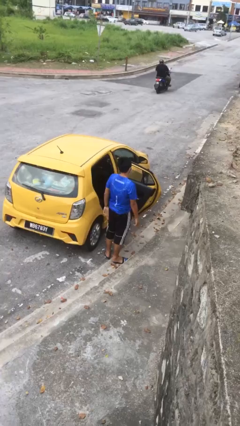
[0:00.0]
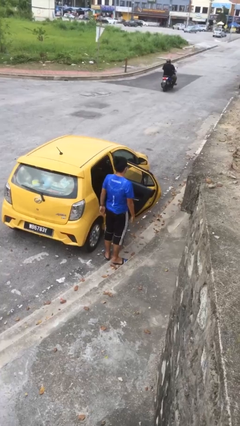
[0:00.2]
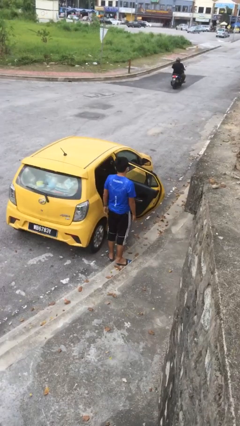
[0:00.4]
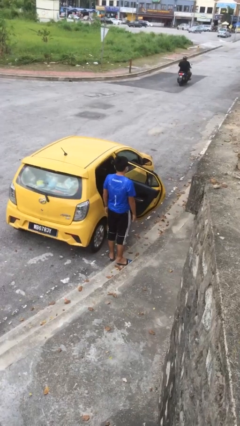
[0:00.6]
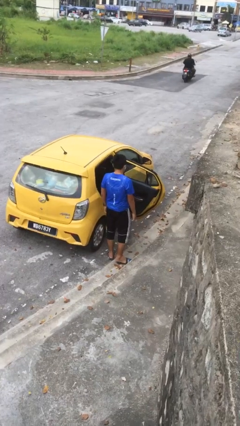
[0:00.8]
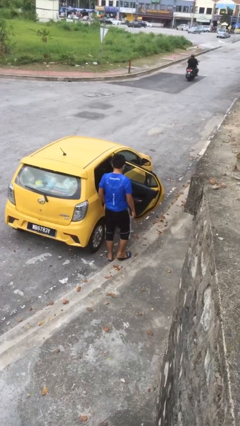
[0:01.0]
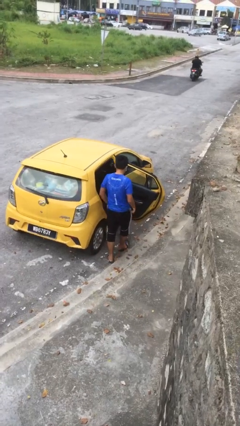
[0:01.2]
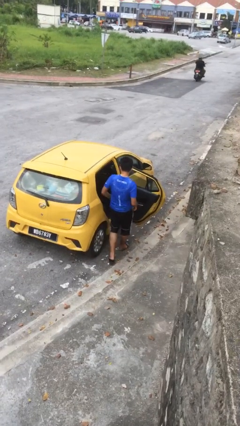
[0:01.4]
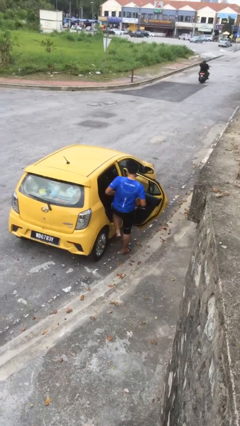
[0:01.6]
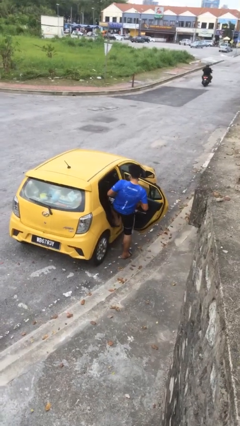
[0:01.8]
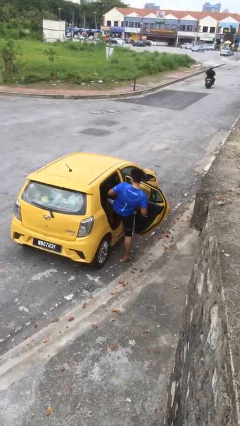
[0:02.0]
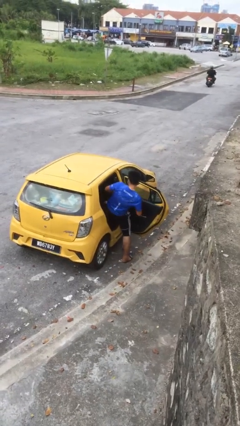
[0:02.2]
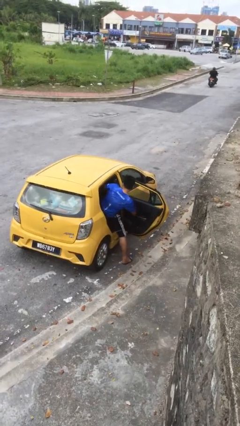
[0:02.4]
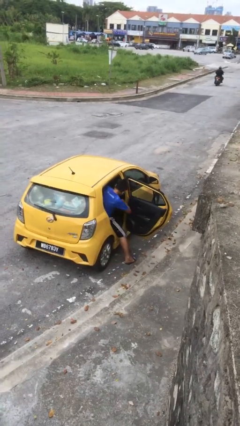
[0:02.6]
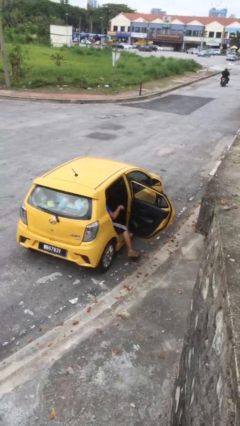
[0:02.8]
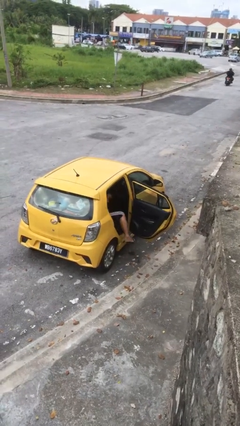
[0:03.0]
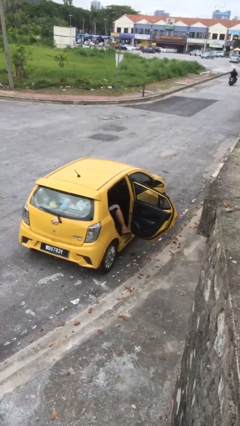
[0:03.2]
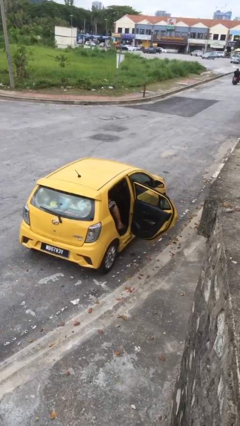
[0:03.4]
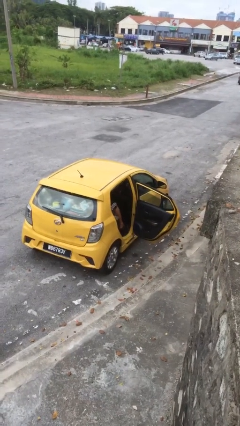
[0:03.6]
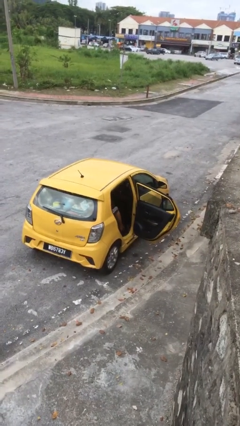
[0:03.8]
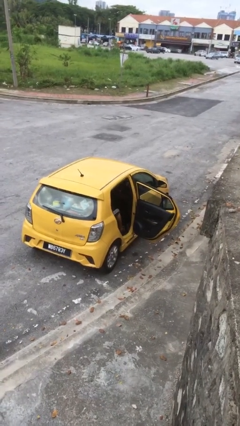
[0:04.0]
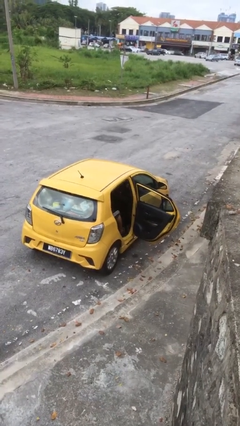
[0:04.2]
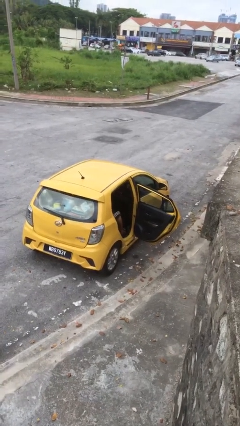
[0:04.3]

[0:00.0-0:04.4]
person enters car

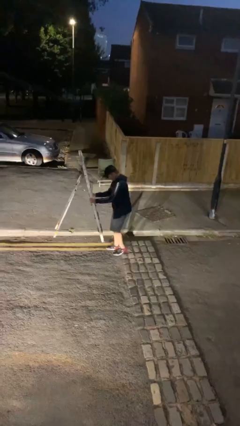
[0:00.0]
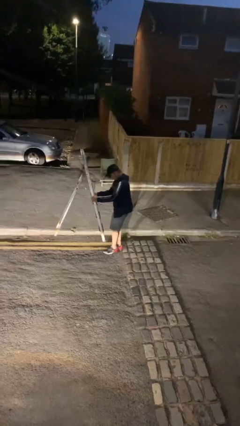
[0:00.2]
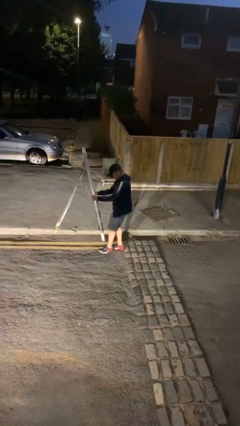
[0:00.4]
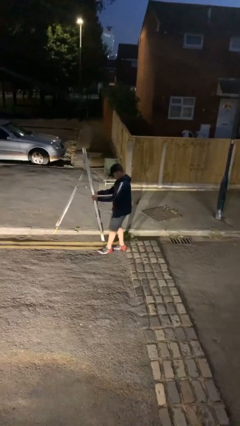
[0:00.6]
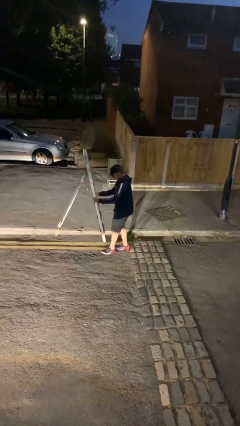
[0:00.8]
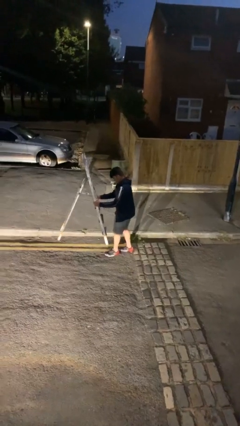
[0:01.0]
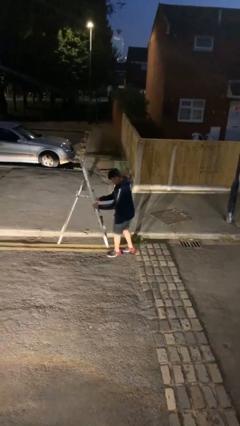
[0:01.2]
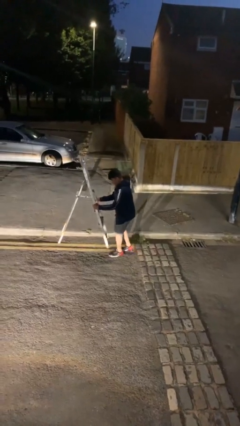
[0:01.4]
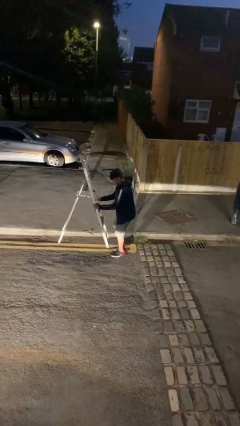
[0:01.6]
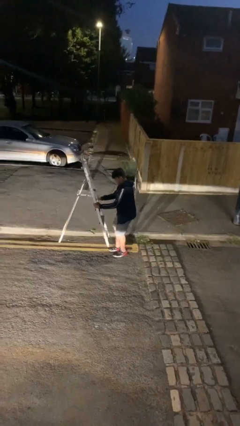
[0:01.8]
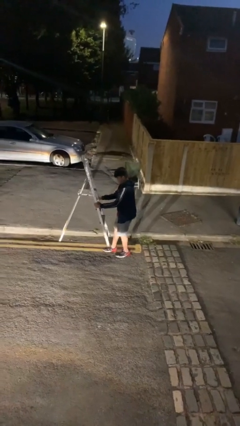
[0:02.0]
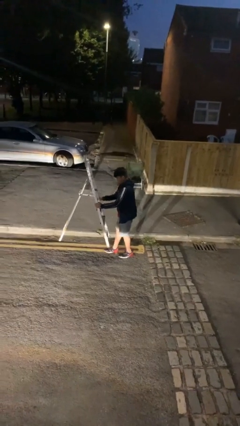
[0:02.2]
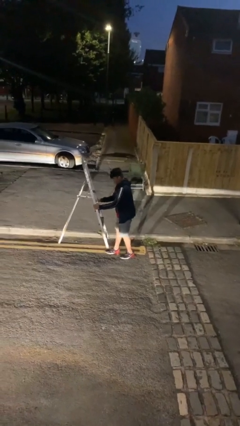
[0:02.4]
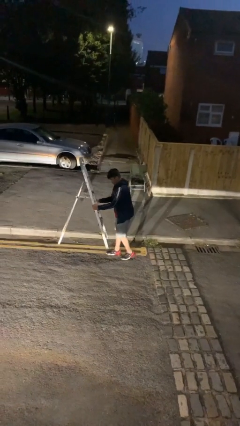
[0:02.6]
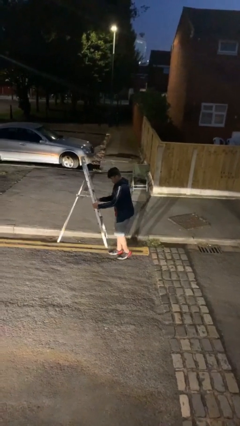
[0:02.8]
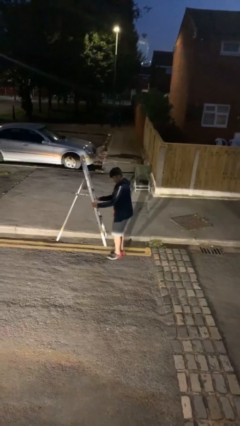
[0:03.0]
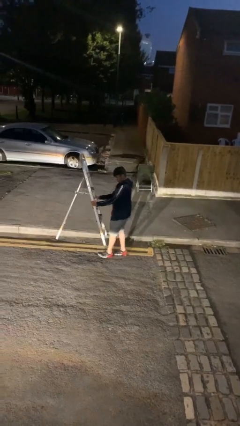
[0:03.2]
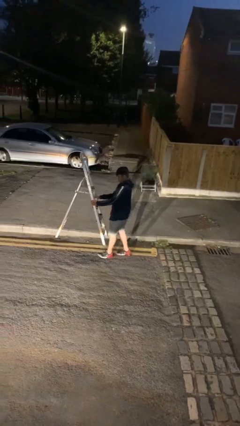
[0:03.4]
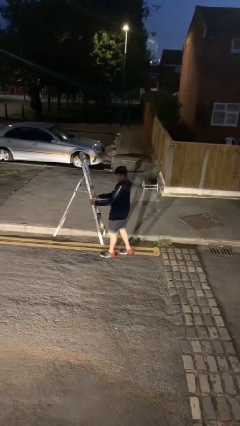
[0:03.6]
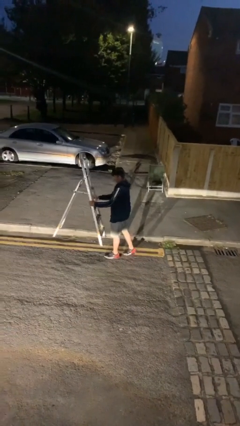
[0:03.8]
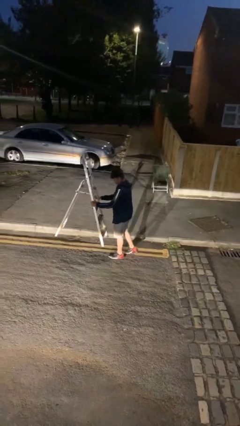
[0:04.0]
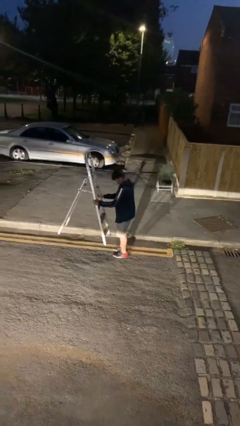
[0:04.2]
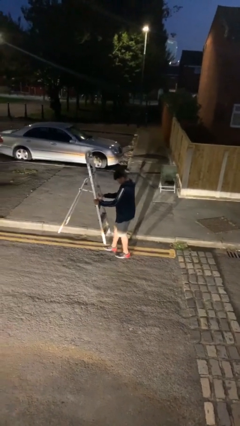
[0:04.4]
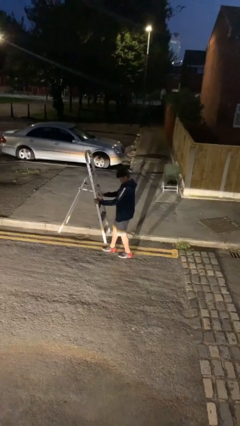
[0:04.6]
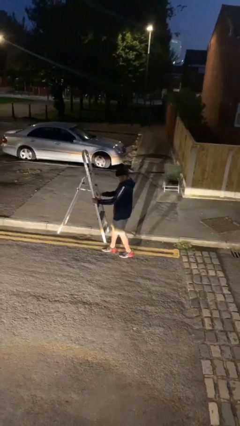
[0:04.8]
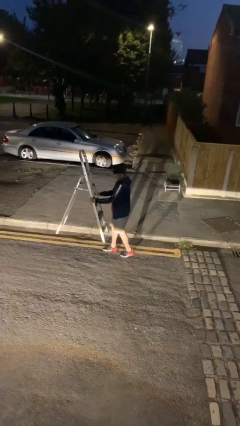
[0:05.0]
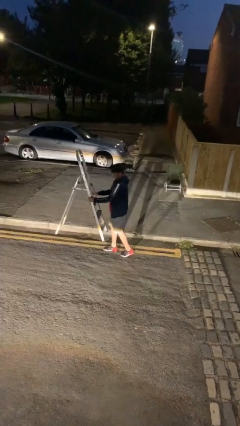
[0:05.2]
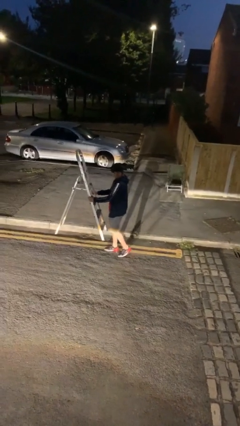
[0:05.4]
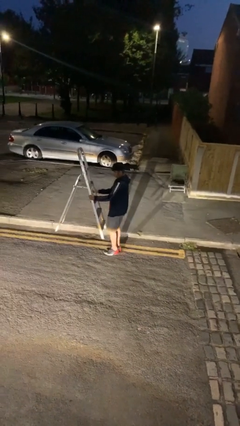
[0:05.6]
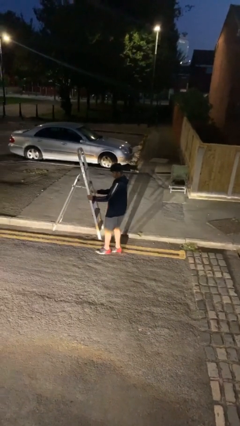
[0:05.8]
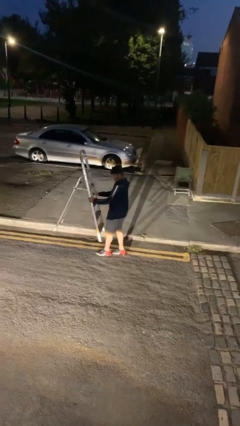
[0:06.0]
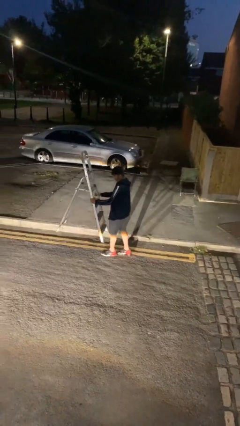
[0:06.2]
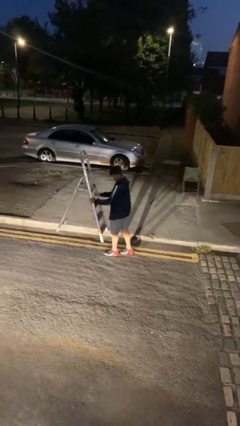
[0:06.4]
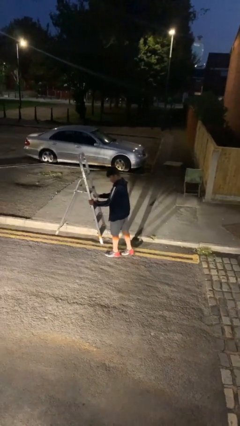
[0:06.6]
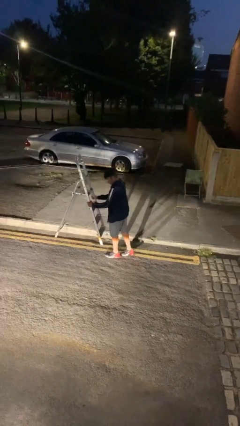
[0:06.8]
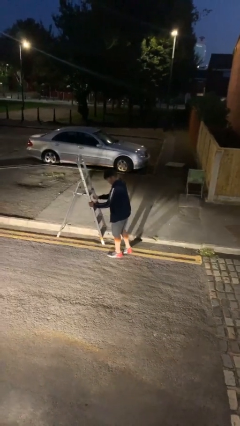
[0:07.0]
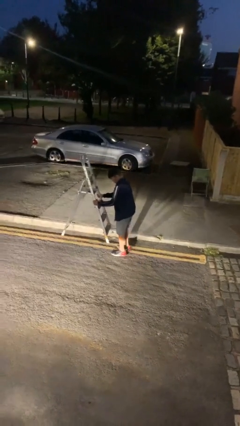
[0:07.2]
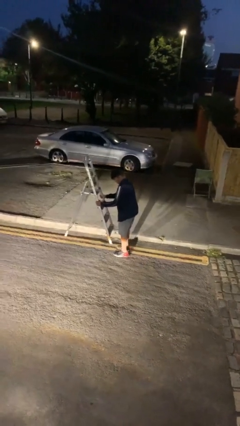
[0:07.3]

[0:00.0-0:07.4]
person carries heavy object

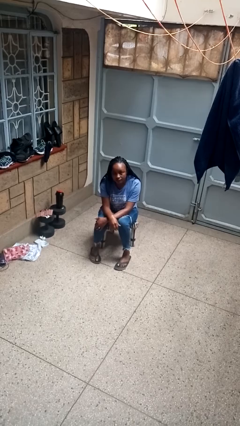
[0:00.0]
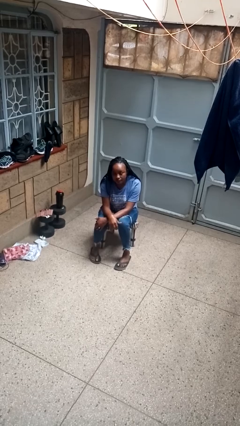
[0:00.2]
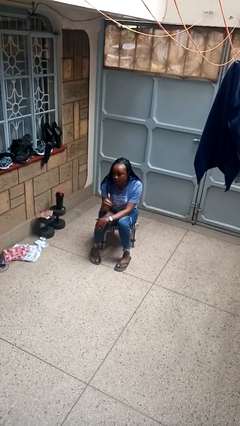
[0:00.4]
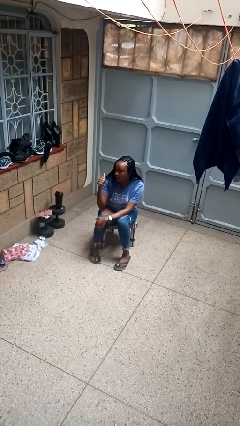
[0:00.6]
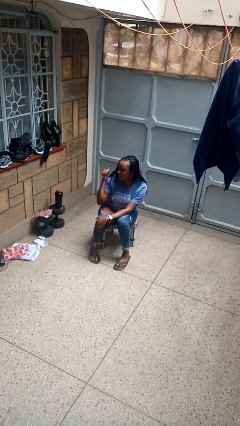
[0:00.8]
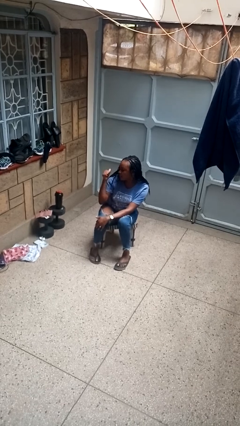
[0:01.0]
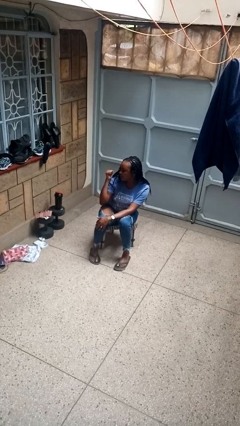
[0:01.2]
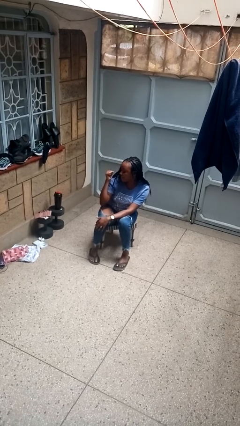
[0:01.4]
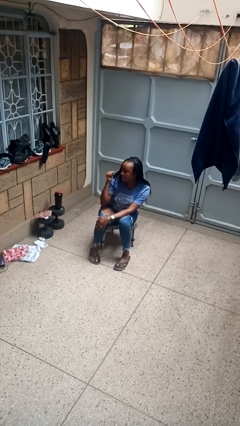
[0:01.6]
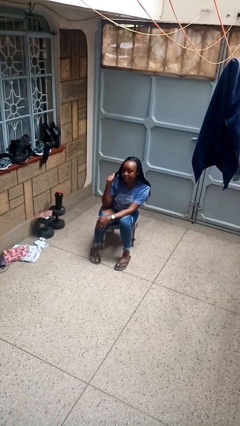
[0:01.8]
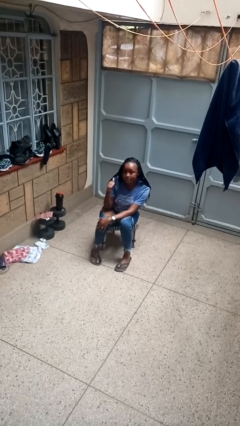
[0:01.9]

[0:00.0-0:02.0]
person gestures behind me

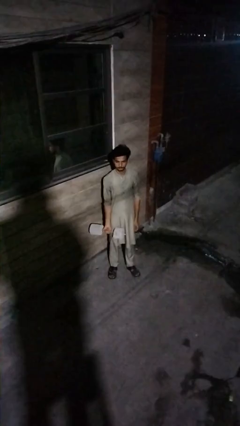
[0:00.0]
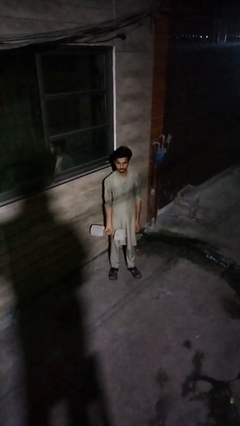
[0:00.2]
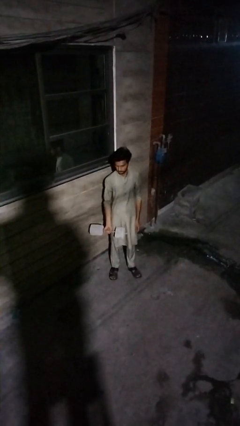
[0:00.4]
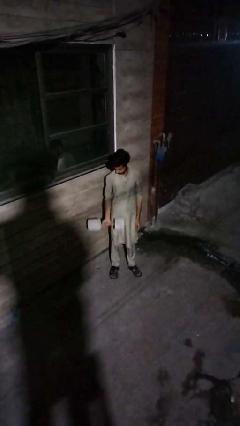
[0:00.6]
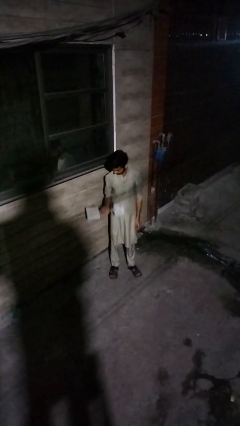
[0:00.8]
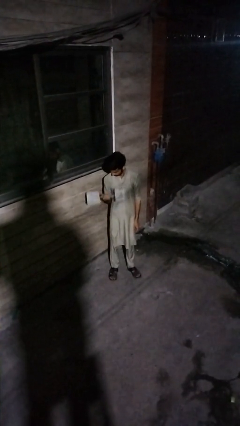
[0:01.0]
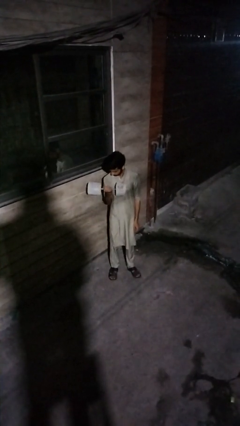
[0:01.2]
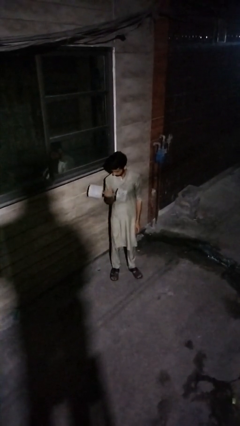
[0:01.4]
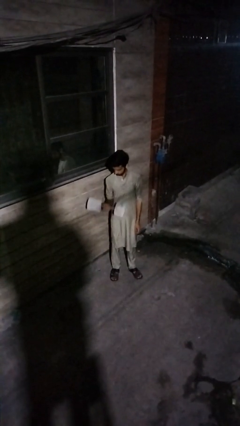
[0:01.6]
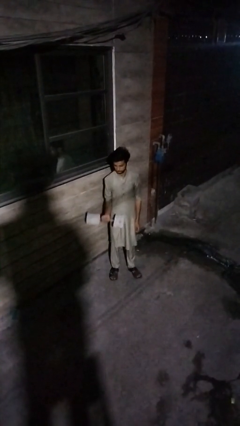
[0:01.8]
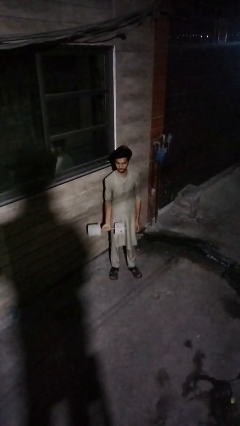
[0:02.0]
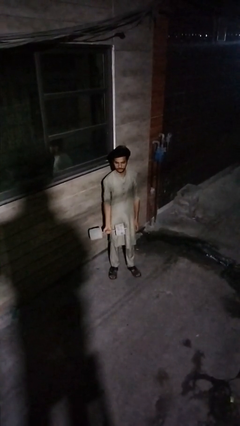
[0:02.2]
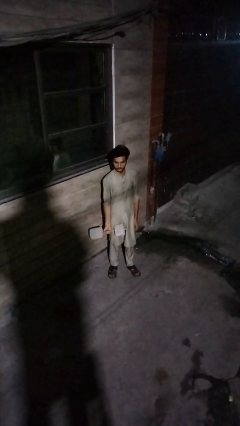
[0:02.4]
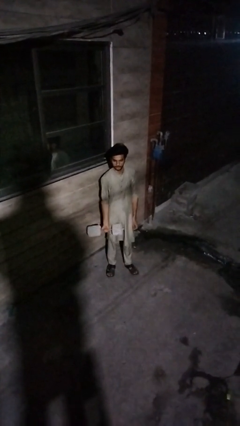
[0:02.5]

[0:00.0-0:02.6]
person lifts dumbbells

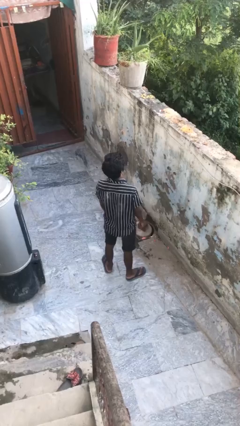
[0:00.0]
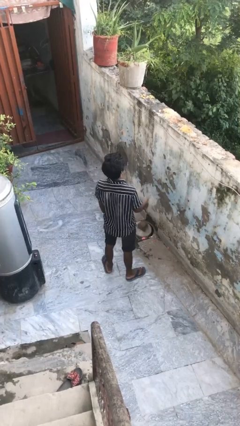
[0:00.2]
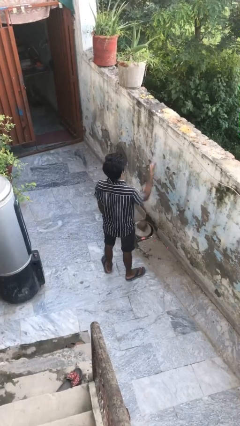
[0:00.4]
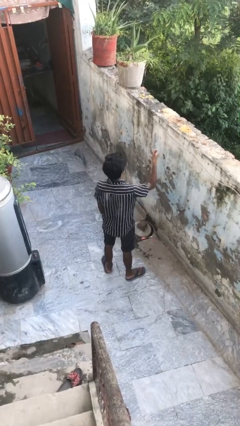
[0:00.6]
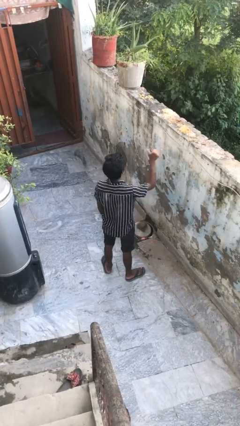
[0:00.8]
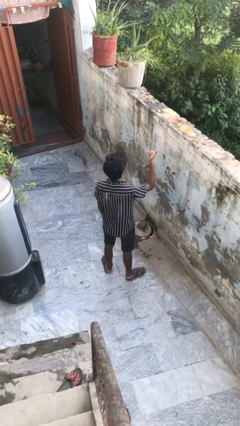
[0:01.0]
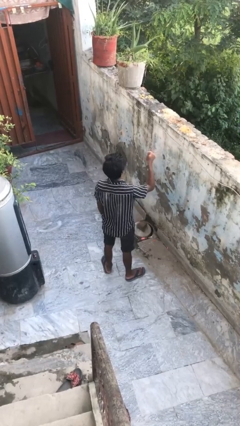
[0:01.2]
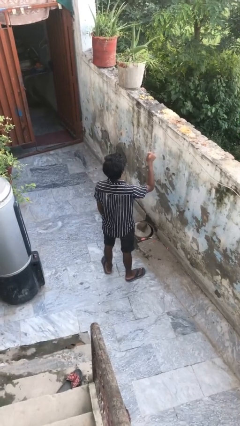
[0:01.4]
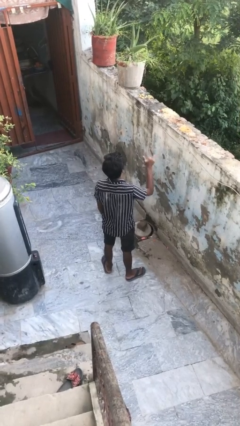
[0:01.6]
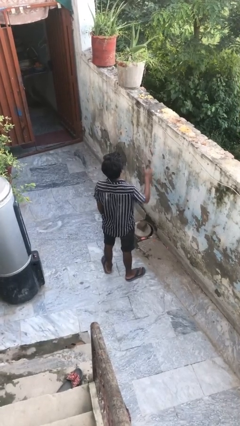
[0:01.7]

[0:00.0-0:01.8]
person gestures hang loose
